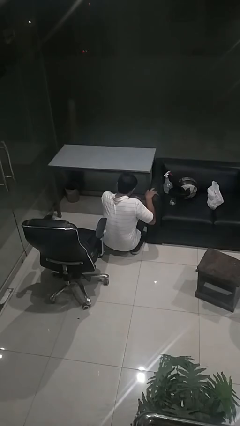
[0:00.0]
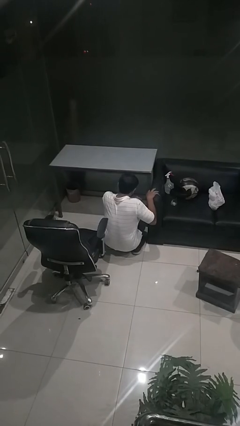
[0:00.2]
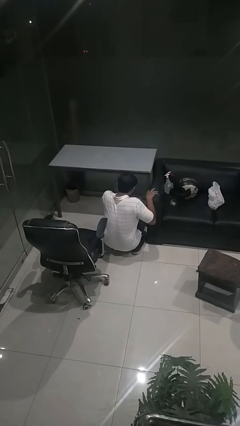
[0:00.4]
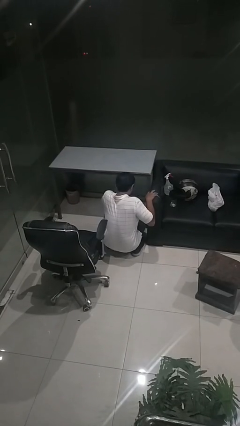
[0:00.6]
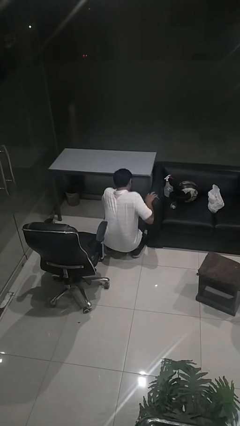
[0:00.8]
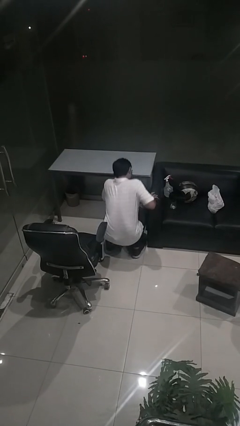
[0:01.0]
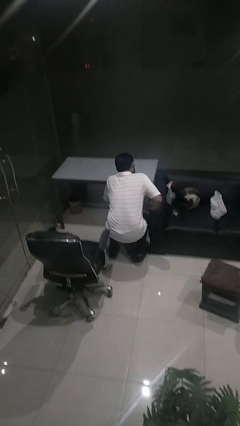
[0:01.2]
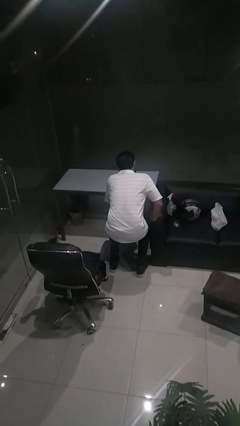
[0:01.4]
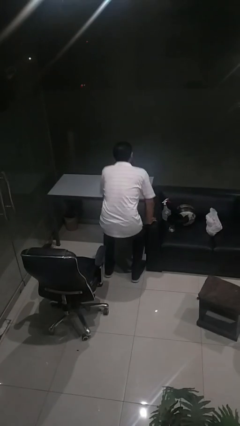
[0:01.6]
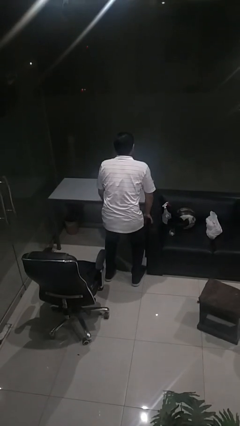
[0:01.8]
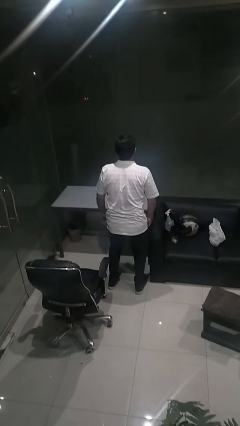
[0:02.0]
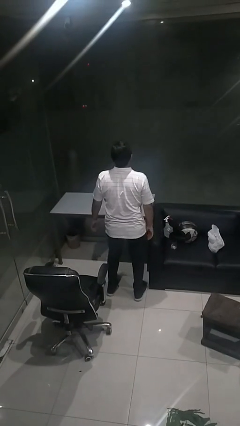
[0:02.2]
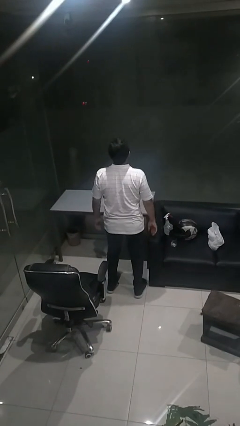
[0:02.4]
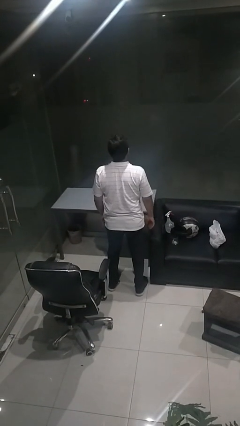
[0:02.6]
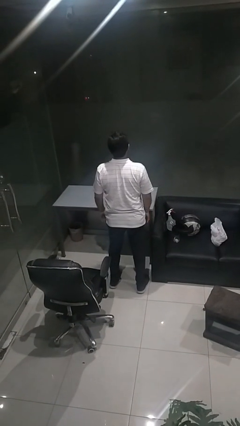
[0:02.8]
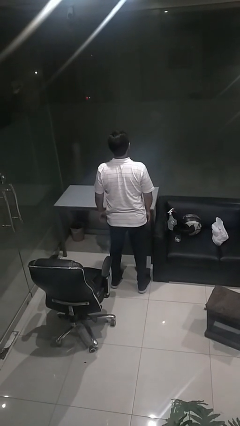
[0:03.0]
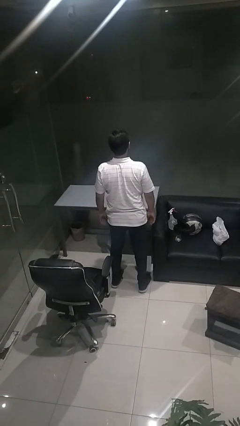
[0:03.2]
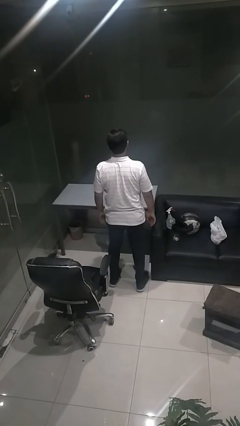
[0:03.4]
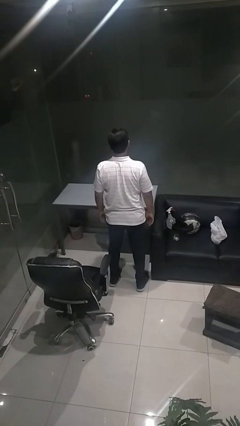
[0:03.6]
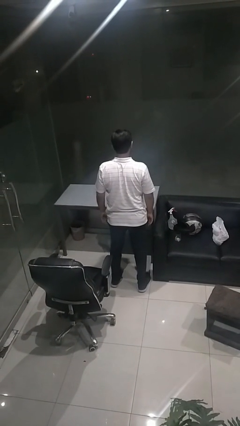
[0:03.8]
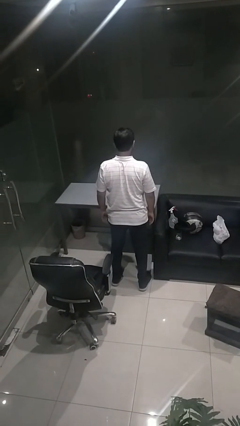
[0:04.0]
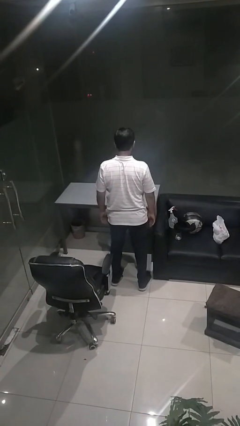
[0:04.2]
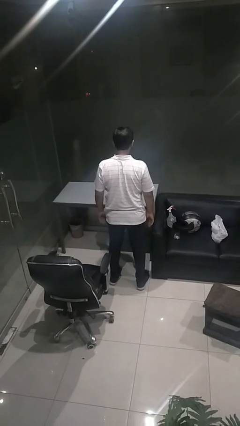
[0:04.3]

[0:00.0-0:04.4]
person stands up from floor

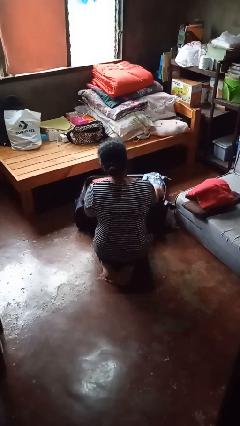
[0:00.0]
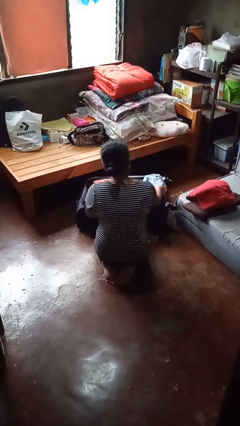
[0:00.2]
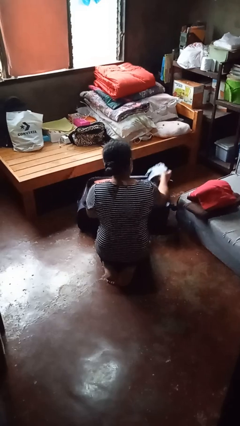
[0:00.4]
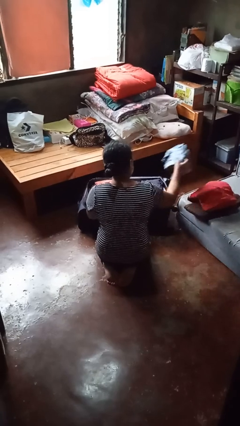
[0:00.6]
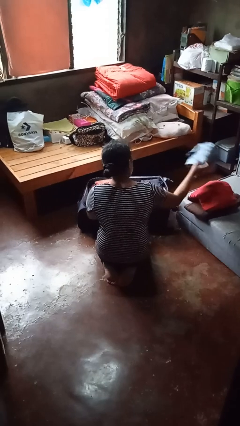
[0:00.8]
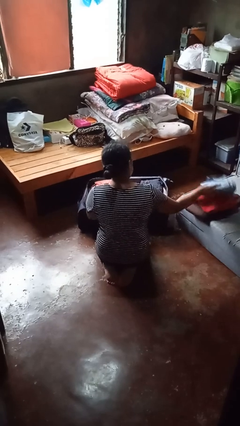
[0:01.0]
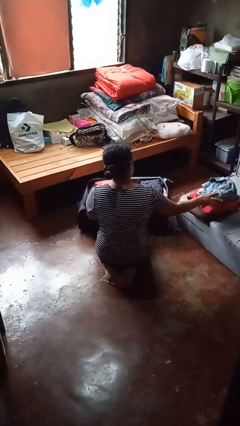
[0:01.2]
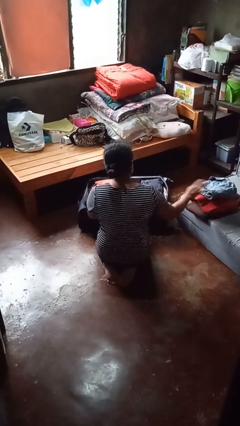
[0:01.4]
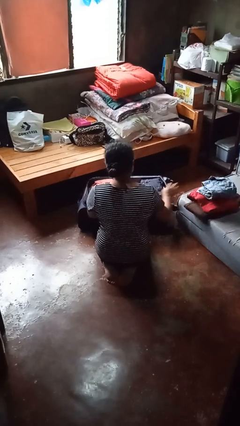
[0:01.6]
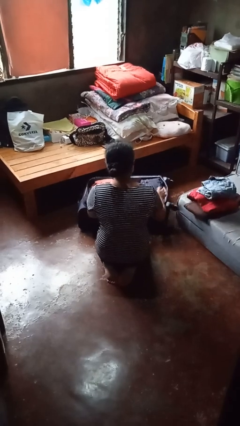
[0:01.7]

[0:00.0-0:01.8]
person unloads clothes from suitcase

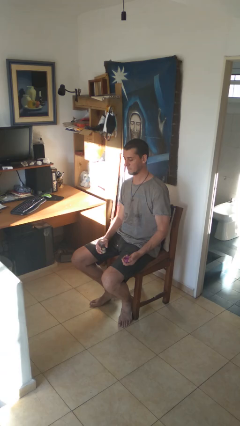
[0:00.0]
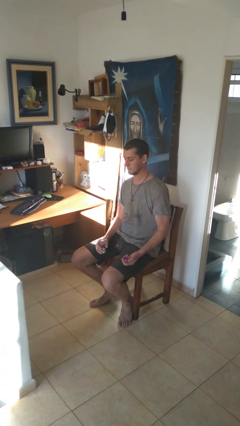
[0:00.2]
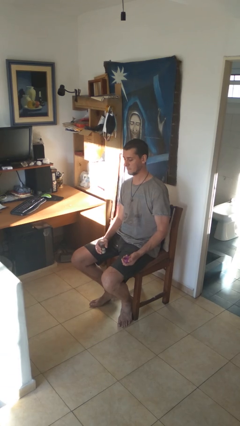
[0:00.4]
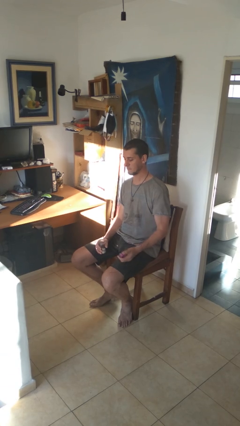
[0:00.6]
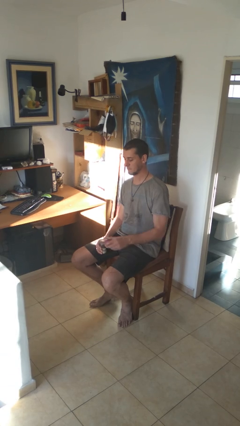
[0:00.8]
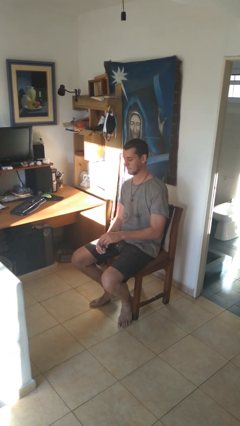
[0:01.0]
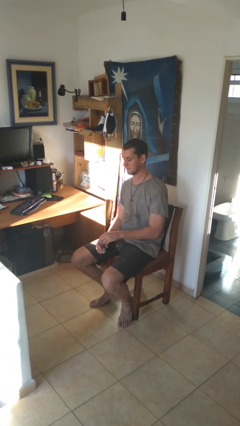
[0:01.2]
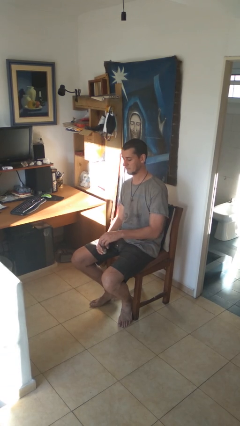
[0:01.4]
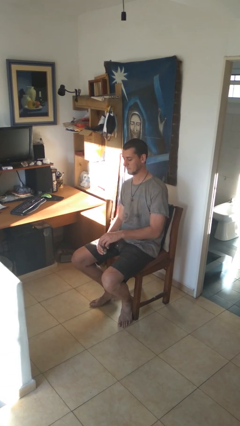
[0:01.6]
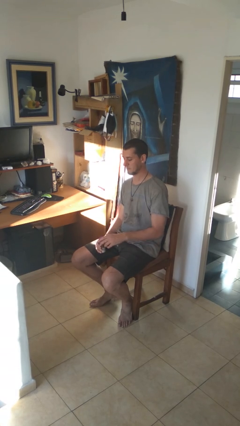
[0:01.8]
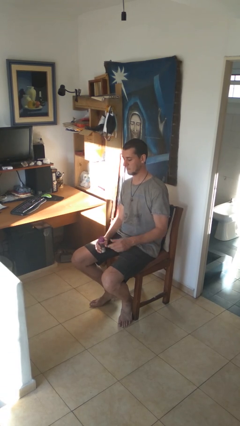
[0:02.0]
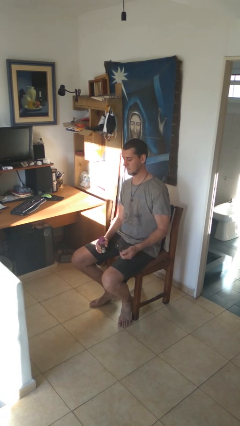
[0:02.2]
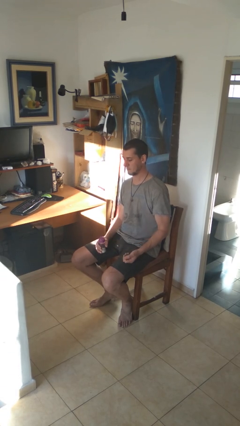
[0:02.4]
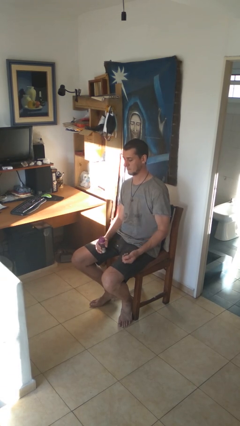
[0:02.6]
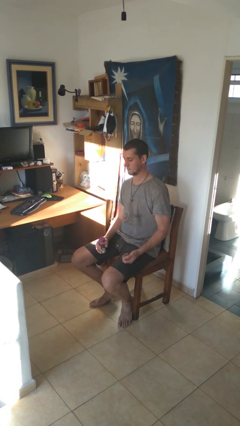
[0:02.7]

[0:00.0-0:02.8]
person closes jar

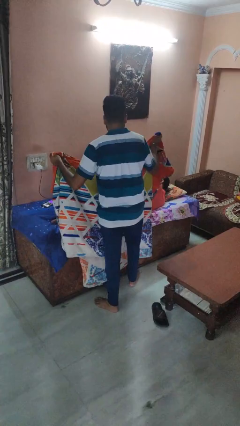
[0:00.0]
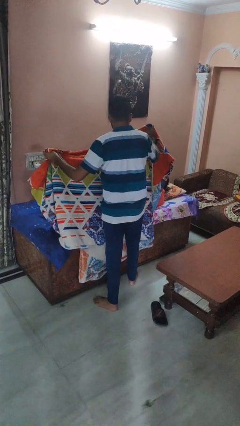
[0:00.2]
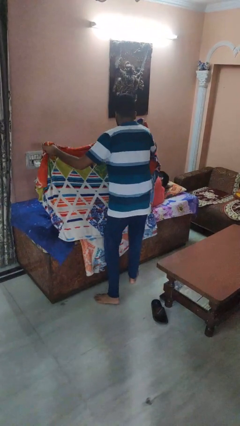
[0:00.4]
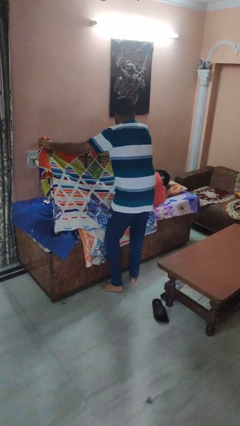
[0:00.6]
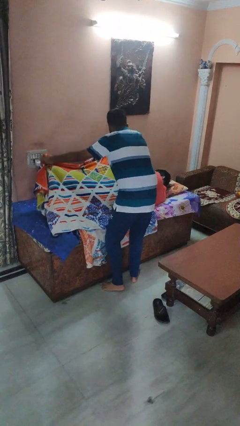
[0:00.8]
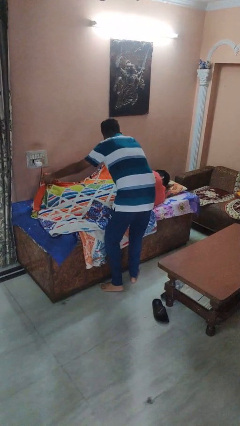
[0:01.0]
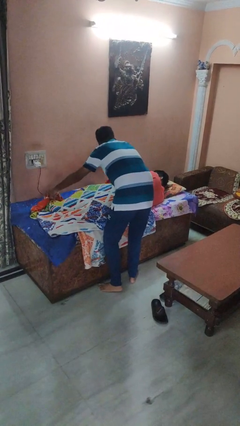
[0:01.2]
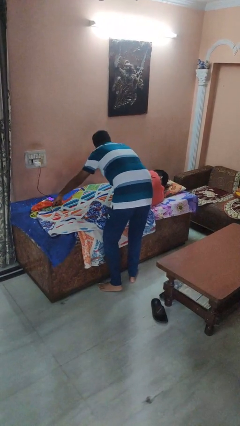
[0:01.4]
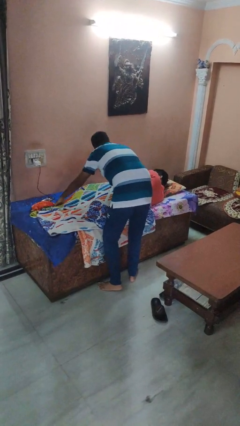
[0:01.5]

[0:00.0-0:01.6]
person covers friend with blanket

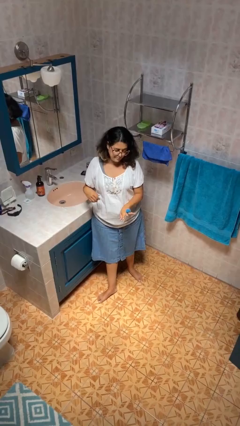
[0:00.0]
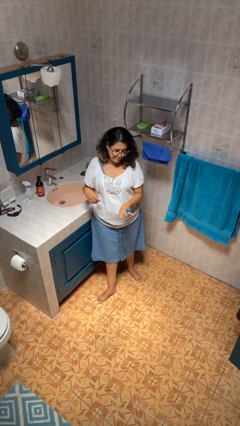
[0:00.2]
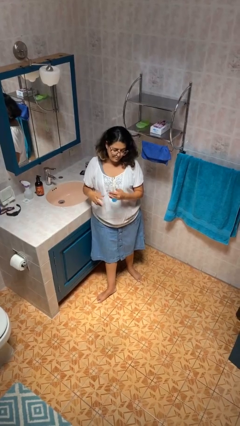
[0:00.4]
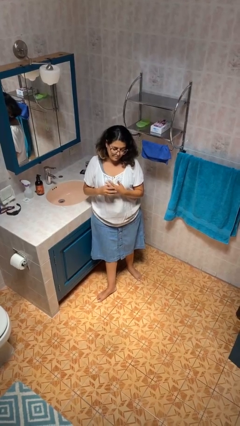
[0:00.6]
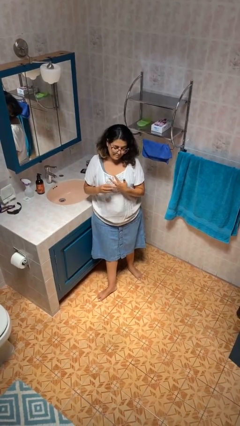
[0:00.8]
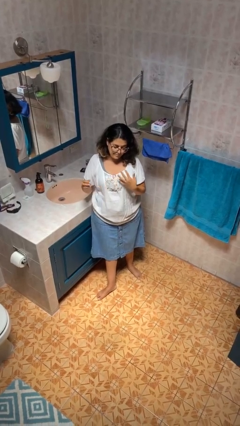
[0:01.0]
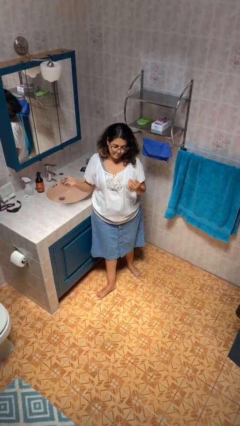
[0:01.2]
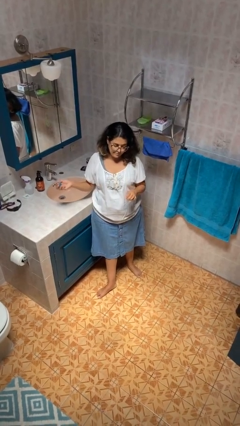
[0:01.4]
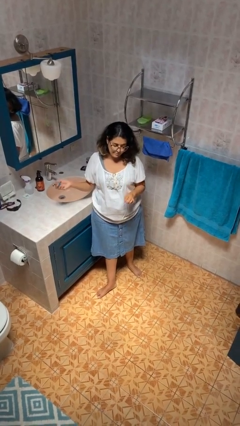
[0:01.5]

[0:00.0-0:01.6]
person takes off ring

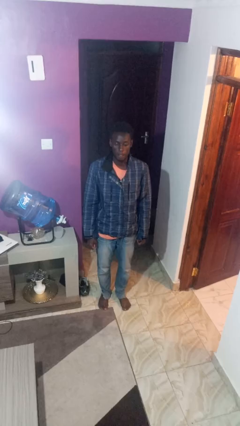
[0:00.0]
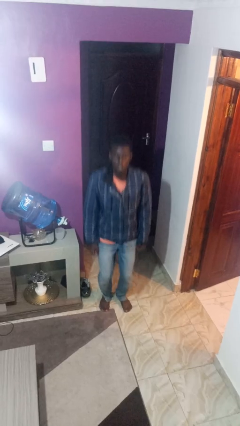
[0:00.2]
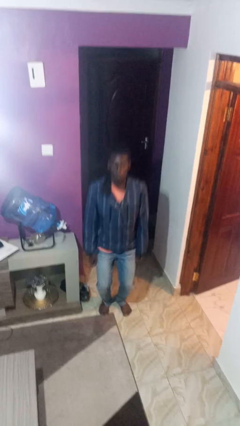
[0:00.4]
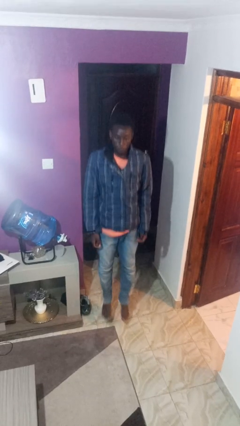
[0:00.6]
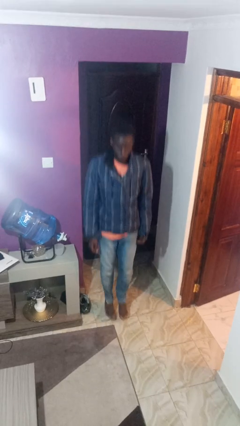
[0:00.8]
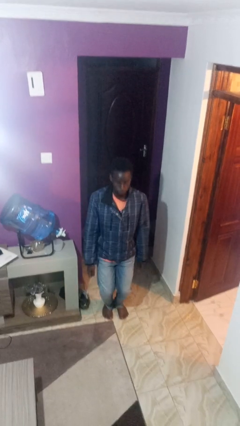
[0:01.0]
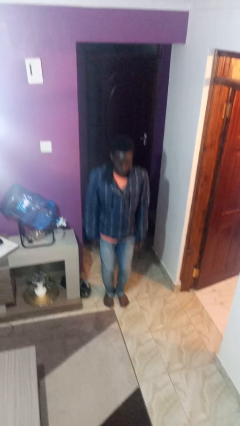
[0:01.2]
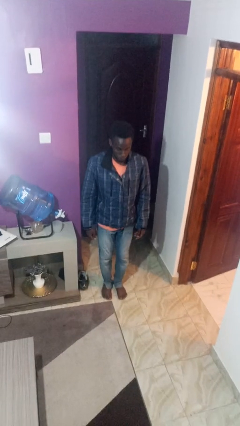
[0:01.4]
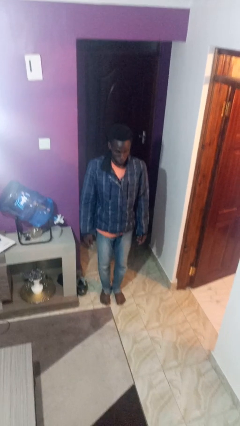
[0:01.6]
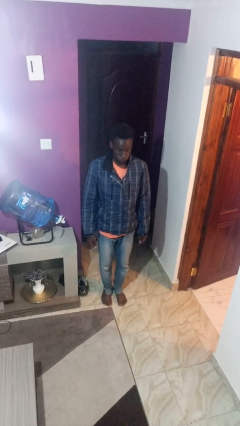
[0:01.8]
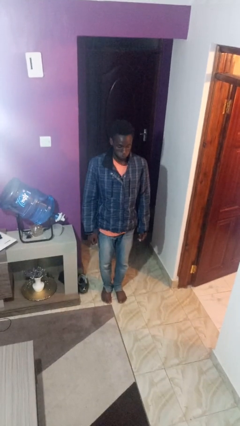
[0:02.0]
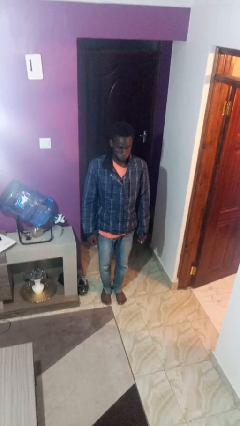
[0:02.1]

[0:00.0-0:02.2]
person jumps

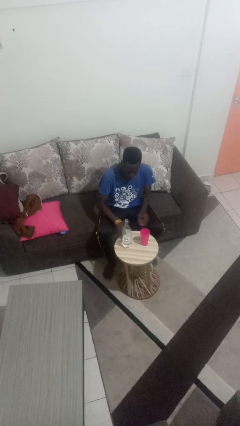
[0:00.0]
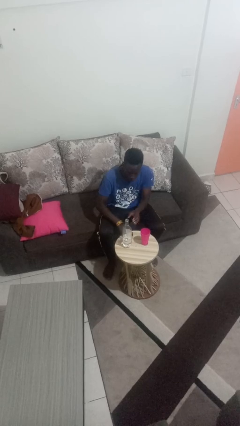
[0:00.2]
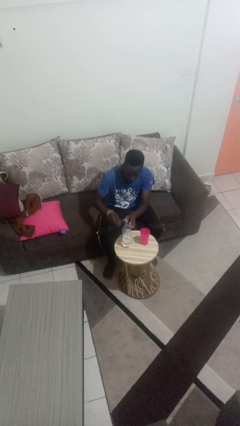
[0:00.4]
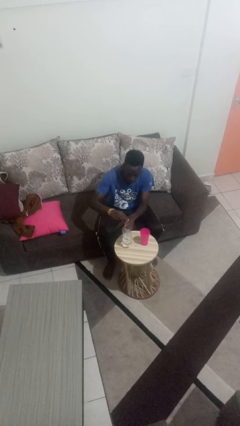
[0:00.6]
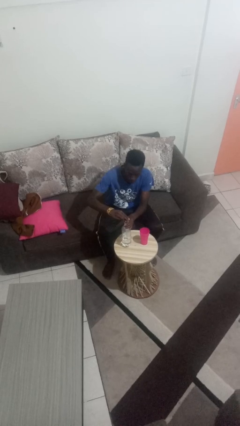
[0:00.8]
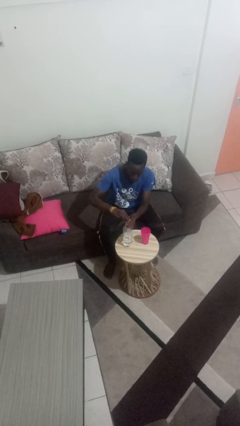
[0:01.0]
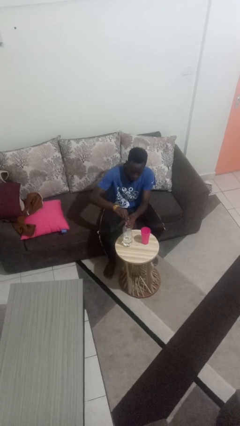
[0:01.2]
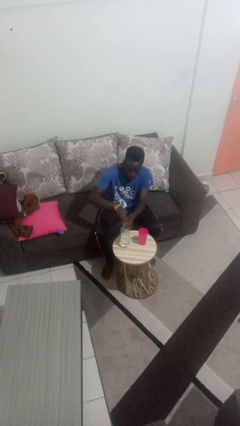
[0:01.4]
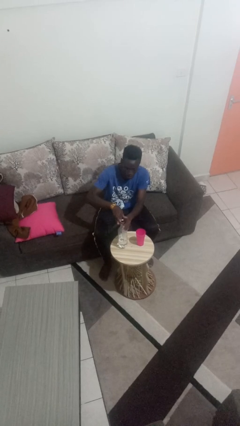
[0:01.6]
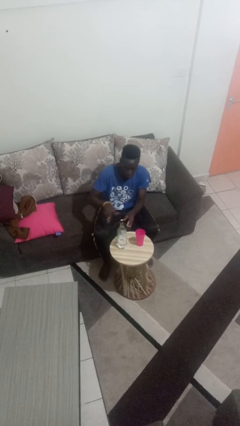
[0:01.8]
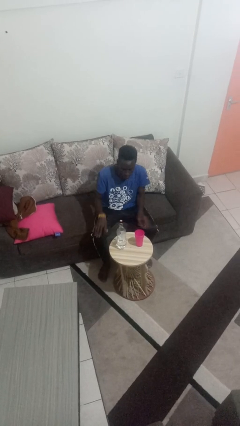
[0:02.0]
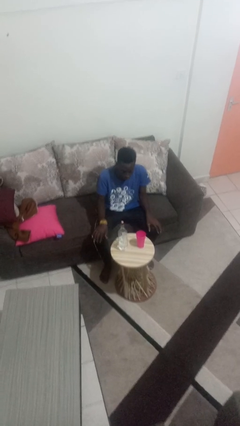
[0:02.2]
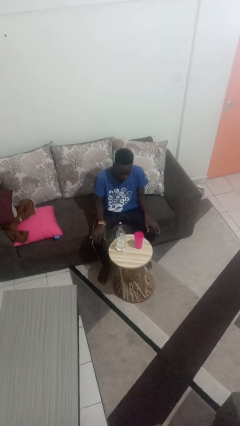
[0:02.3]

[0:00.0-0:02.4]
person screws lid to bottle

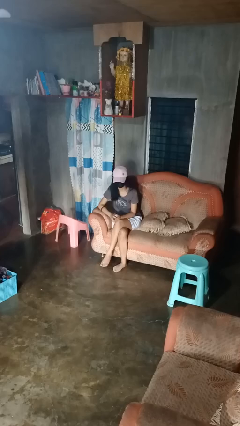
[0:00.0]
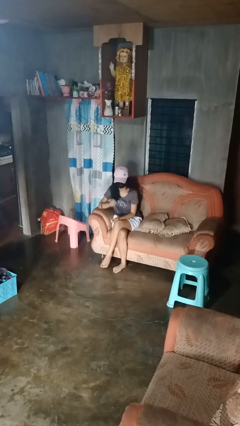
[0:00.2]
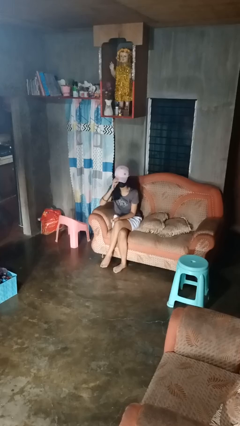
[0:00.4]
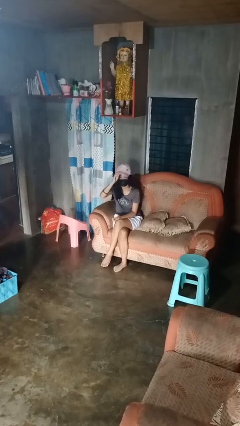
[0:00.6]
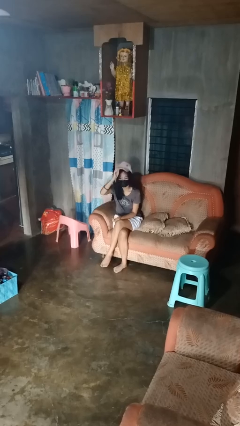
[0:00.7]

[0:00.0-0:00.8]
person takes off hat
